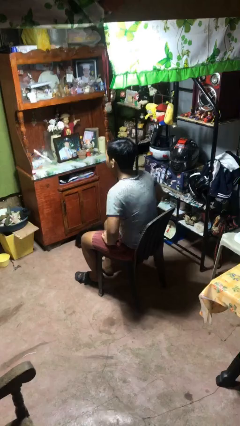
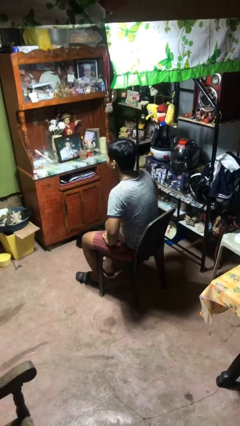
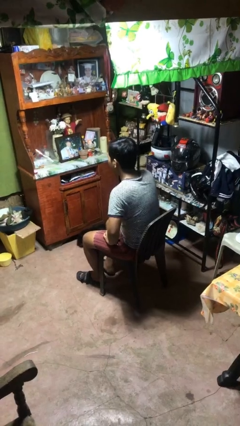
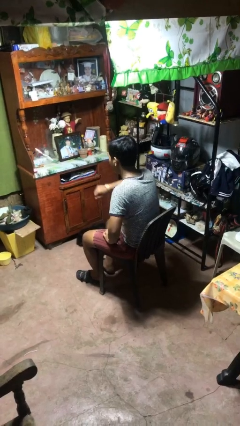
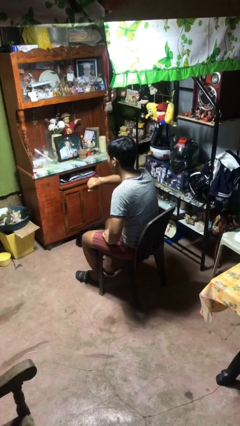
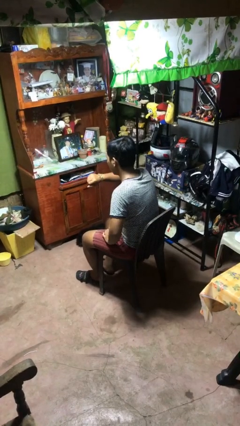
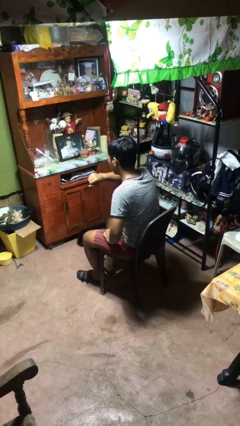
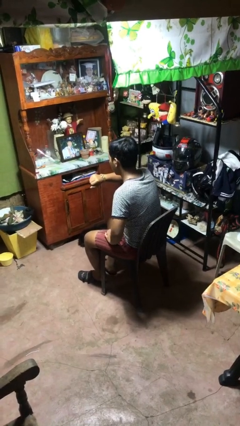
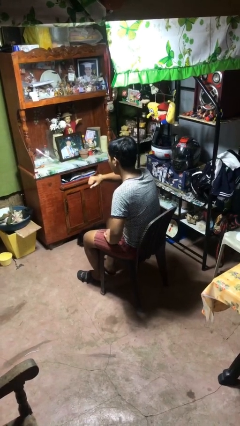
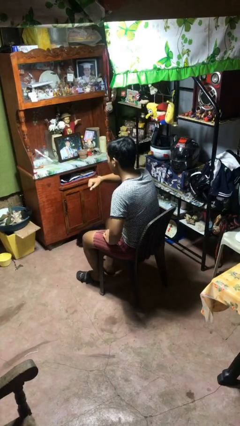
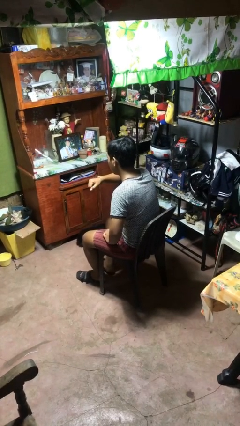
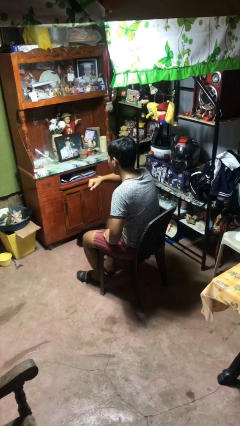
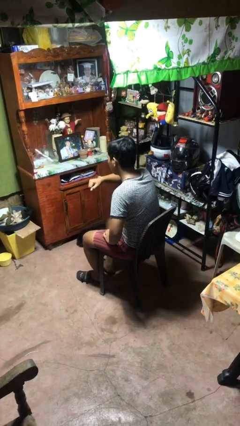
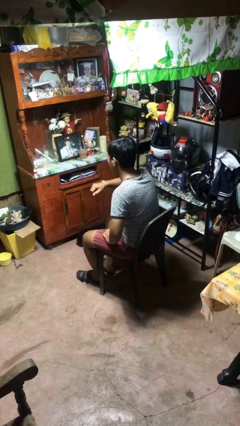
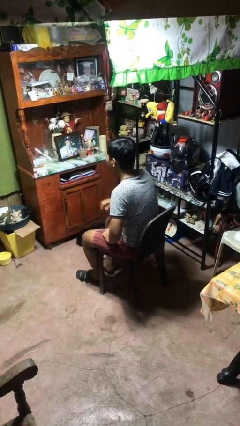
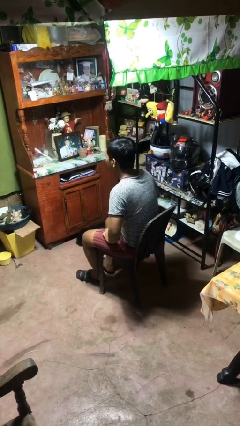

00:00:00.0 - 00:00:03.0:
person looks at wristwatch

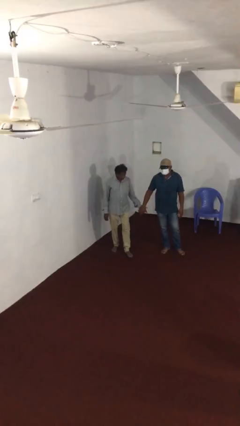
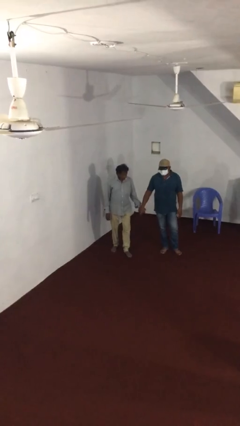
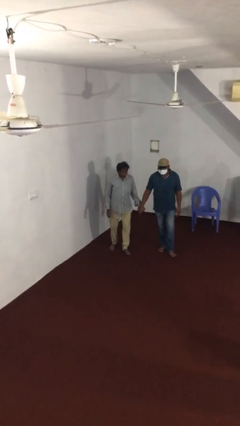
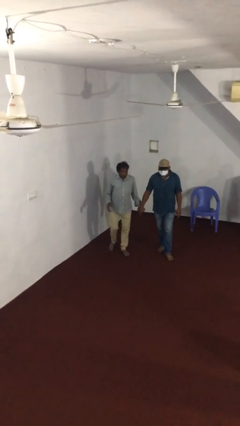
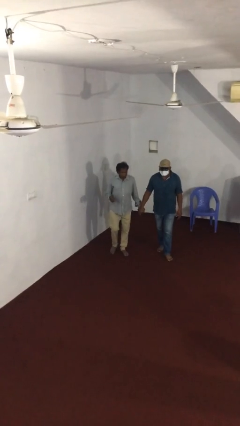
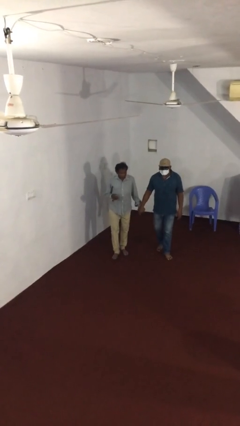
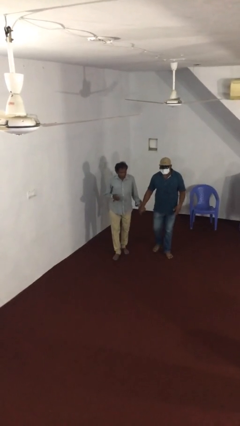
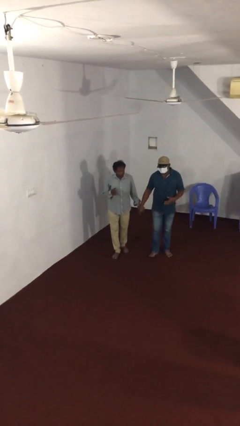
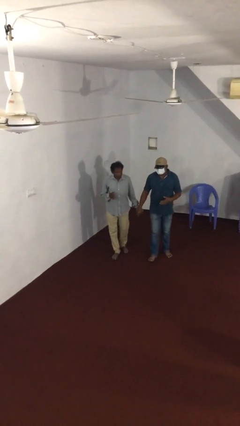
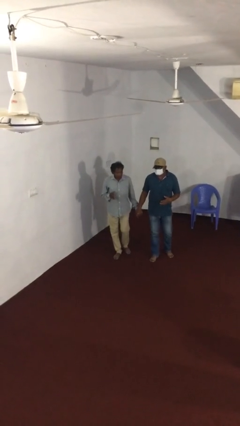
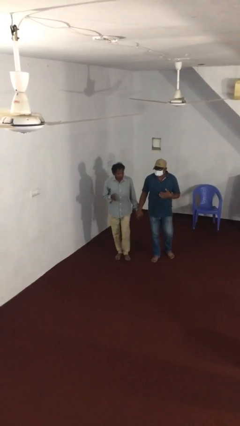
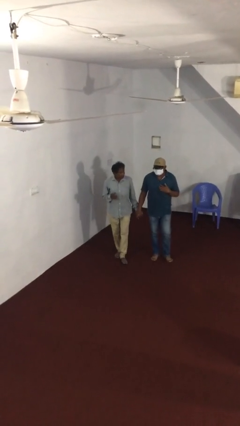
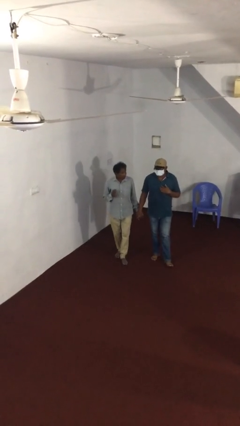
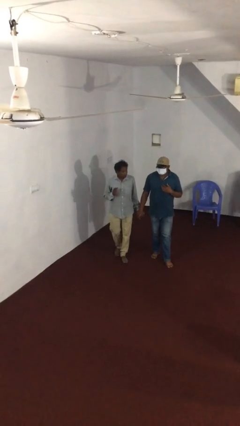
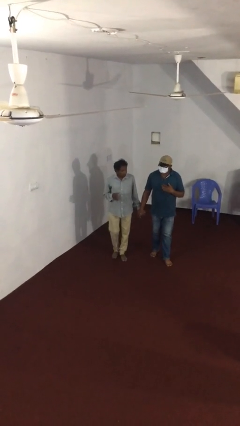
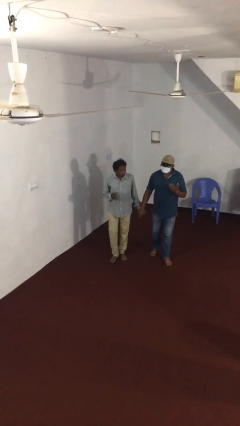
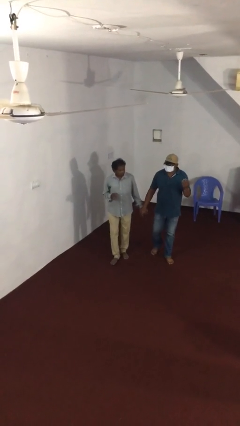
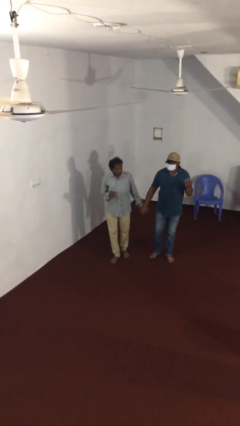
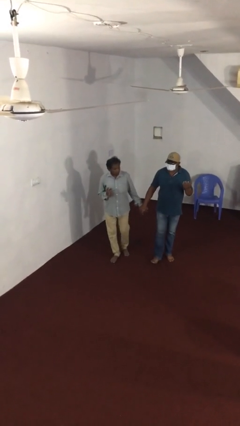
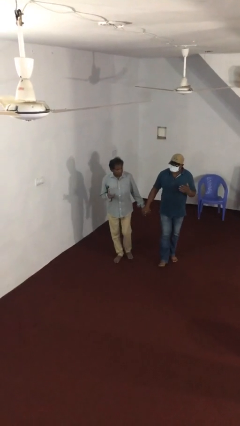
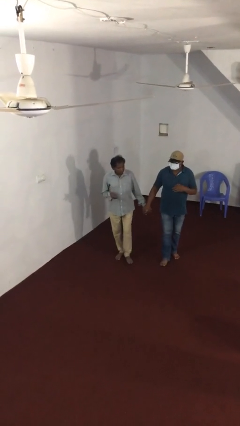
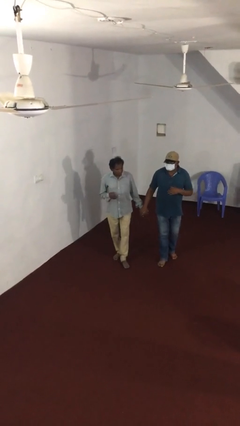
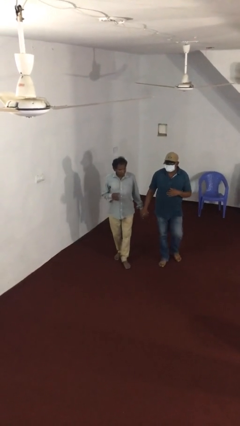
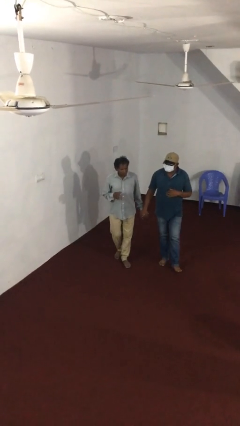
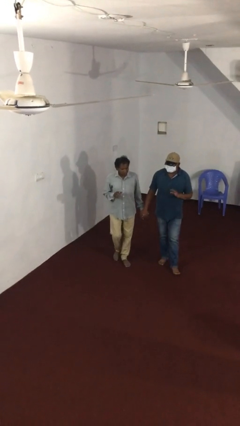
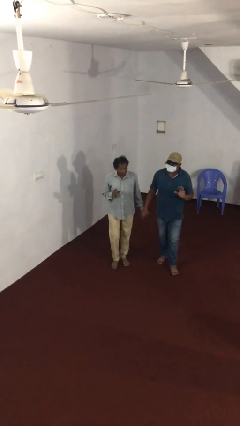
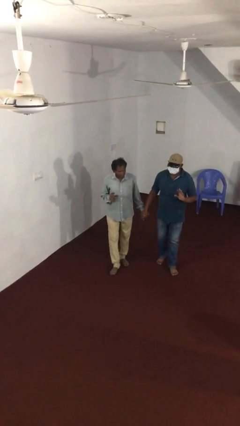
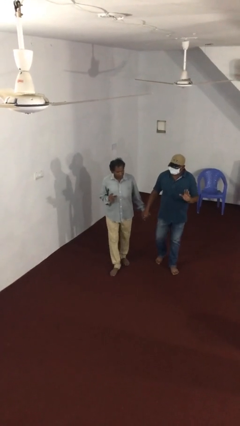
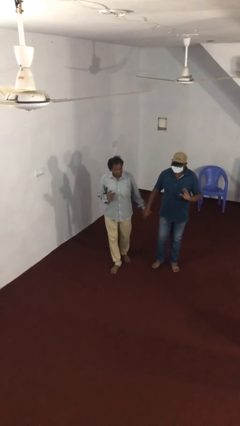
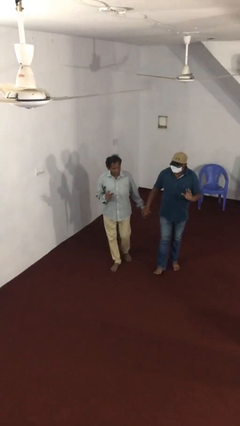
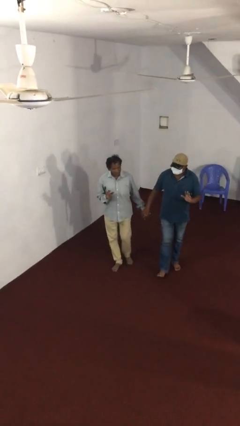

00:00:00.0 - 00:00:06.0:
person holds hand

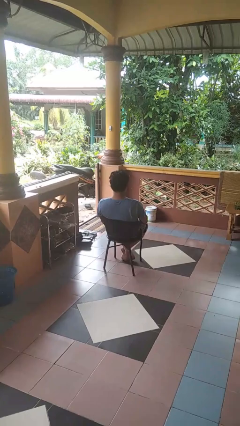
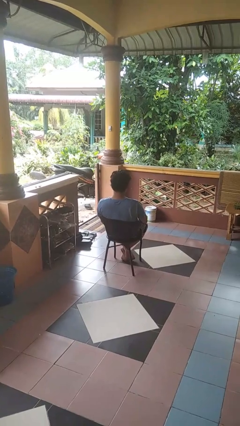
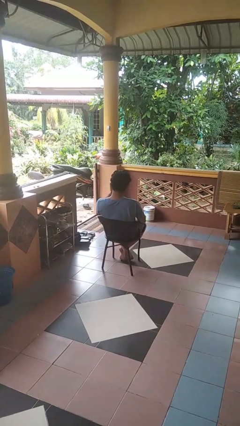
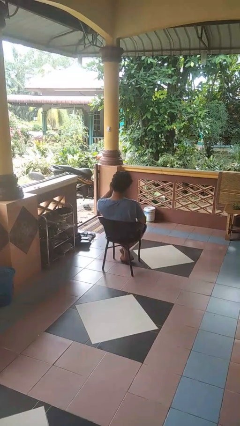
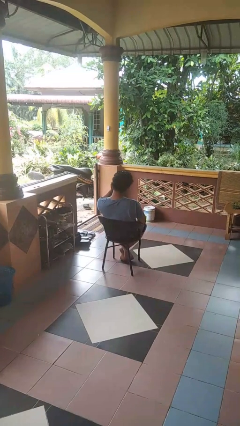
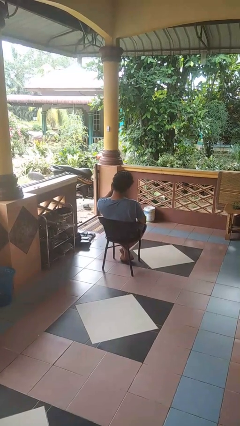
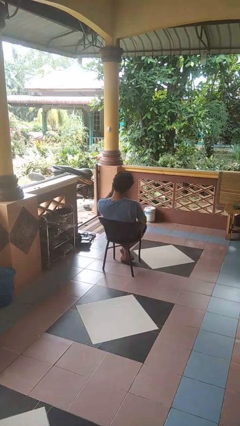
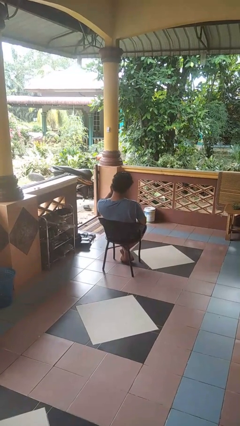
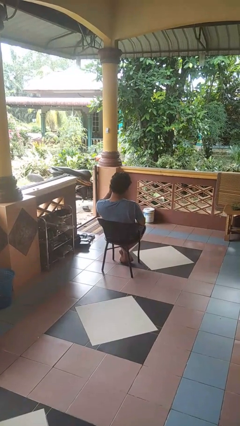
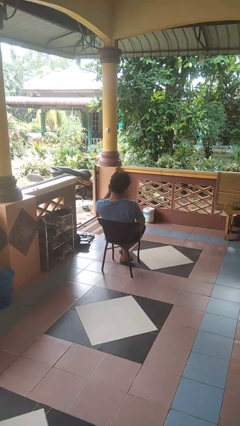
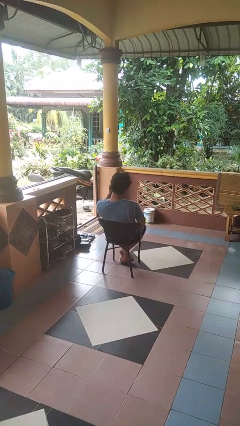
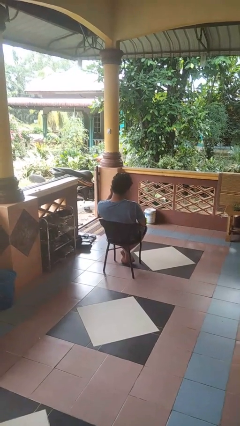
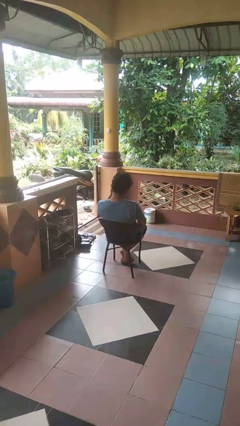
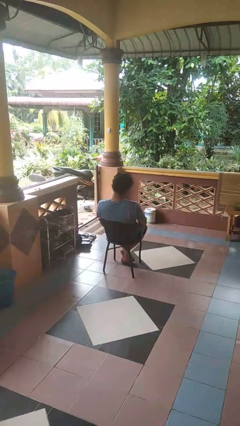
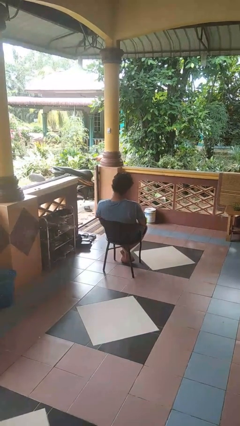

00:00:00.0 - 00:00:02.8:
person touches earlobe

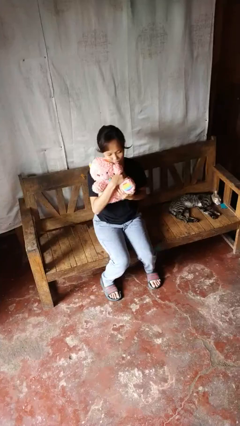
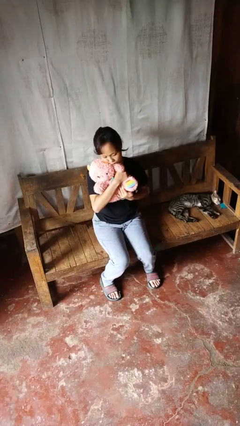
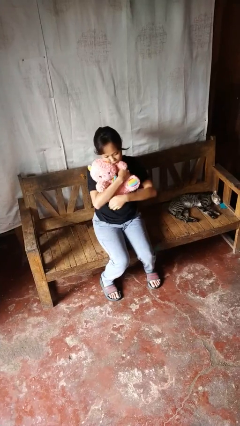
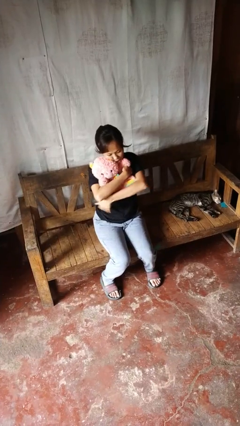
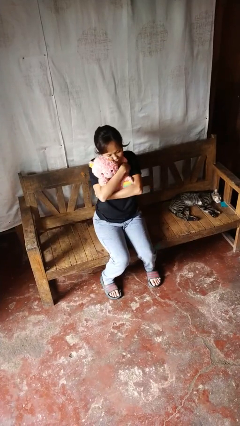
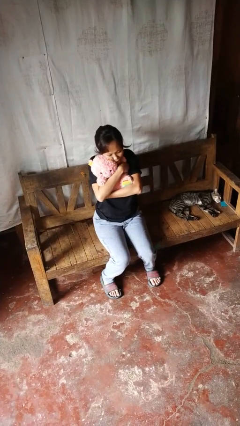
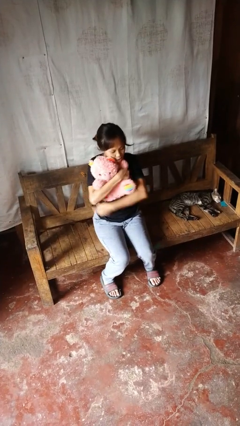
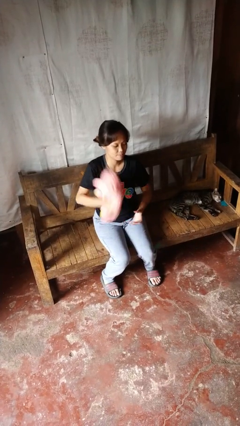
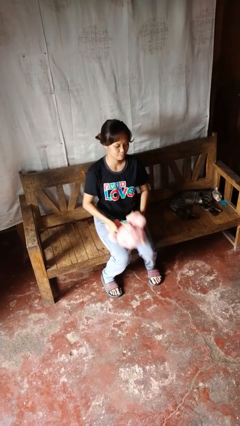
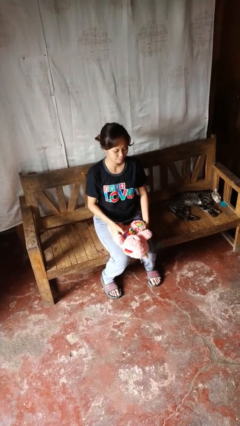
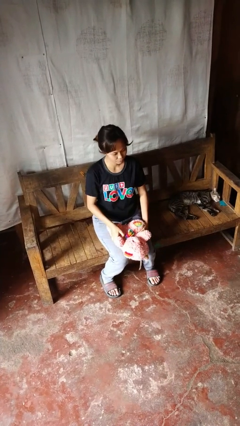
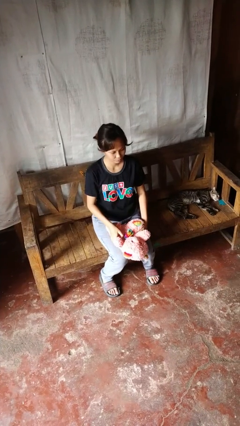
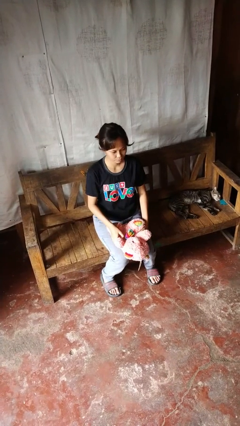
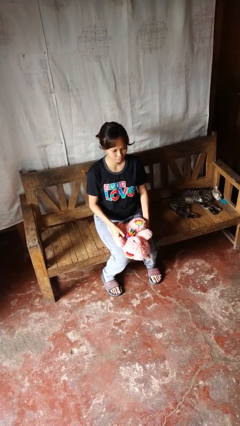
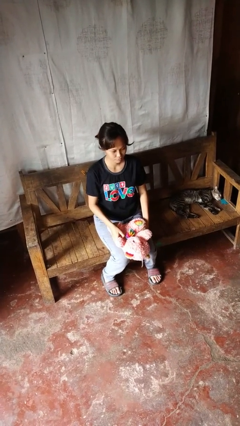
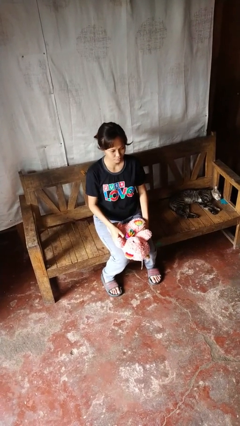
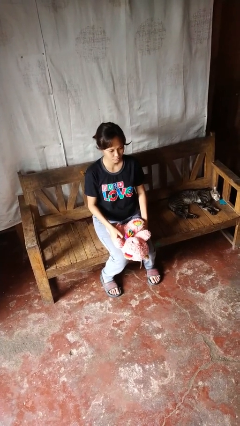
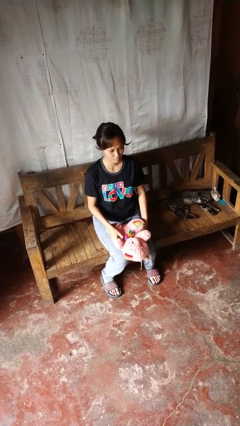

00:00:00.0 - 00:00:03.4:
person hugs stuffed animal

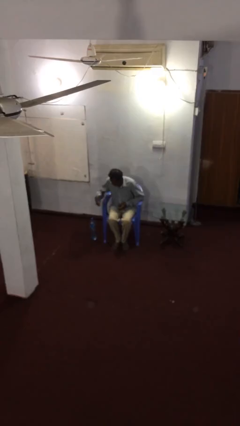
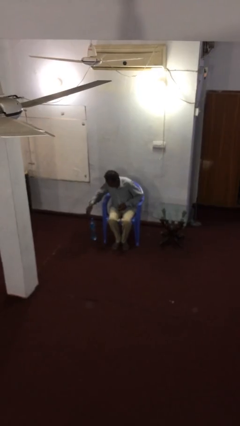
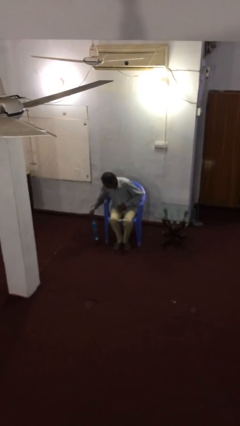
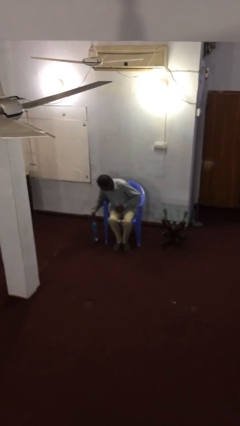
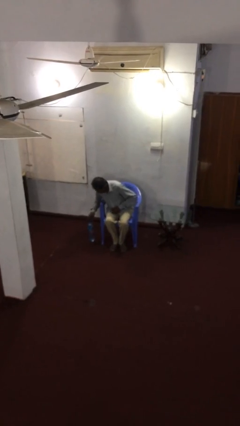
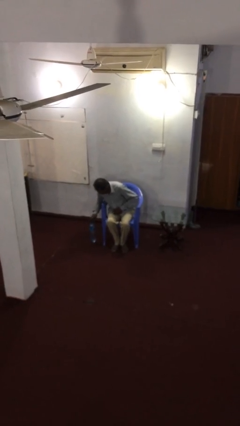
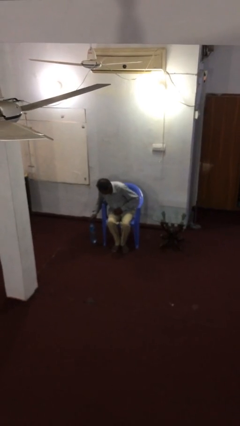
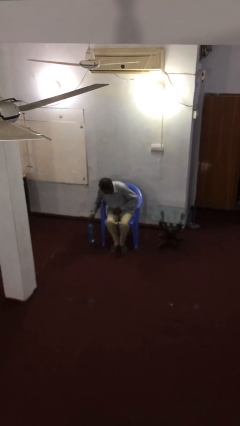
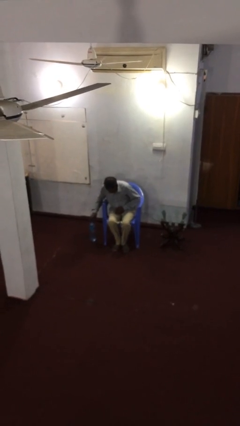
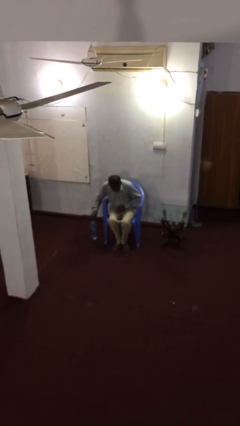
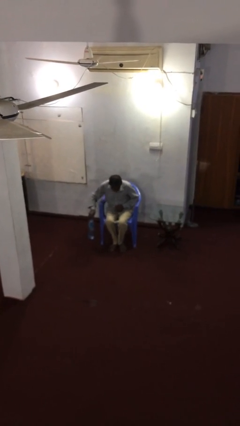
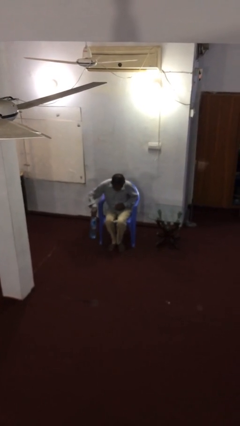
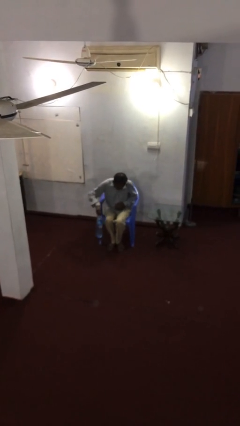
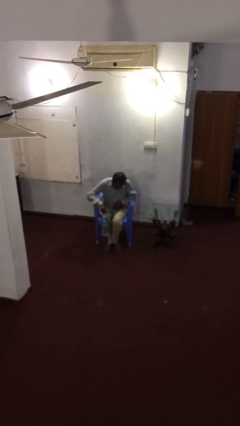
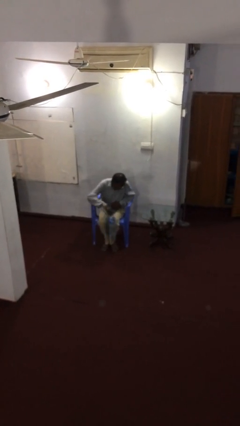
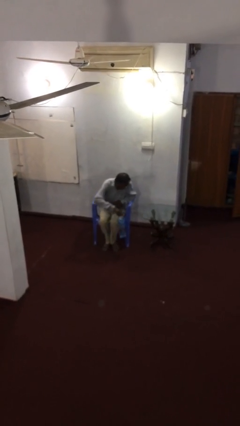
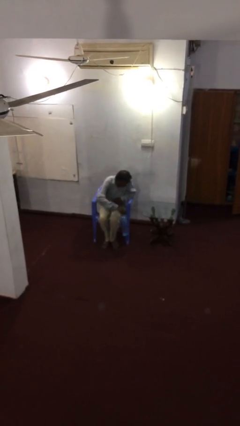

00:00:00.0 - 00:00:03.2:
person picks up object from floor
